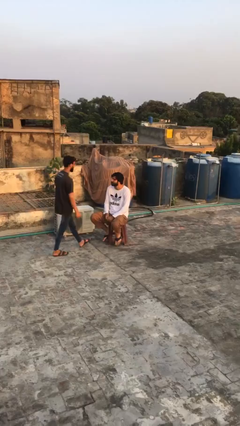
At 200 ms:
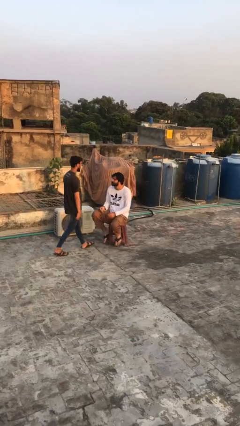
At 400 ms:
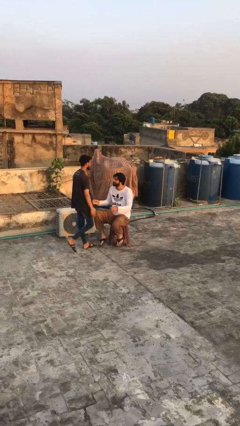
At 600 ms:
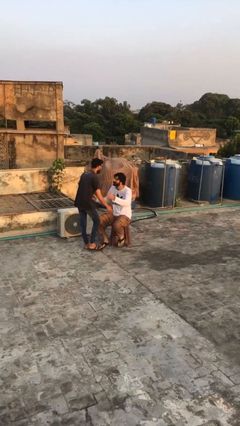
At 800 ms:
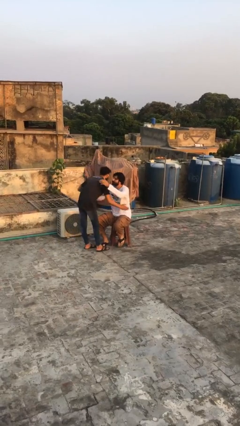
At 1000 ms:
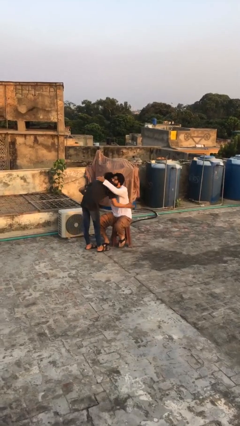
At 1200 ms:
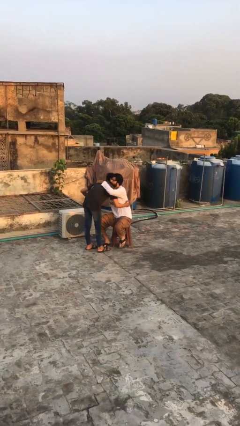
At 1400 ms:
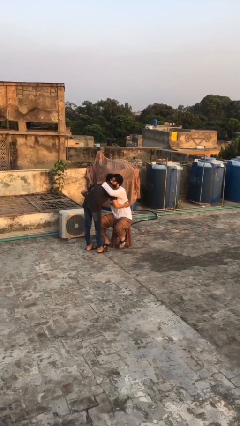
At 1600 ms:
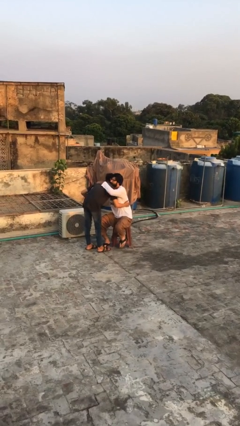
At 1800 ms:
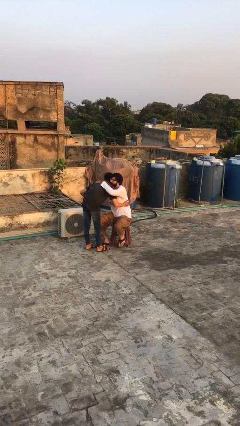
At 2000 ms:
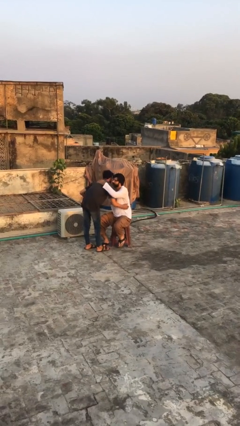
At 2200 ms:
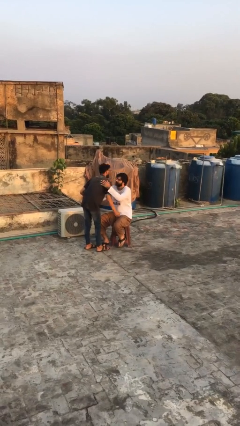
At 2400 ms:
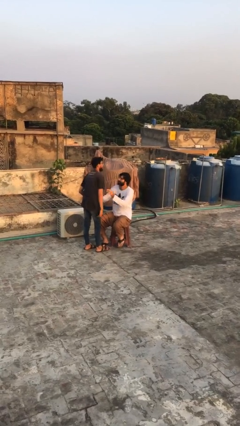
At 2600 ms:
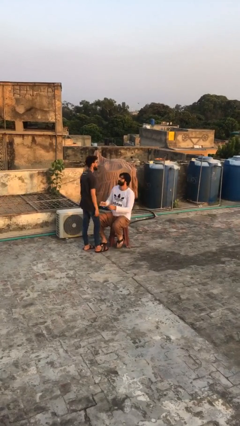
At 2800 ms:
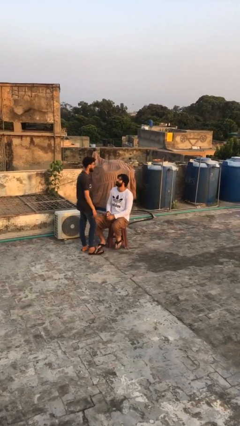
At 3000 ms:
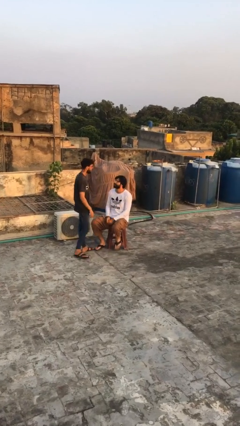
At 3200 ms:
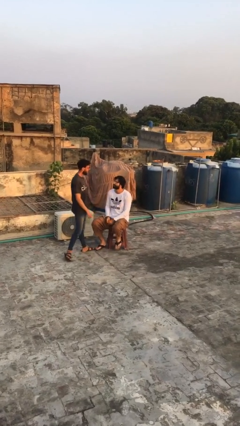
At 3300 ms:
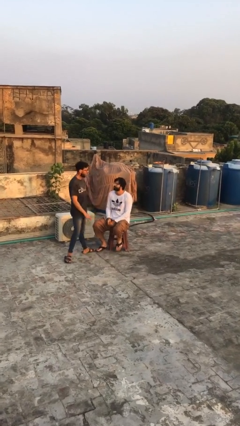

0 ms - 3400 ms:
person embraces person

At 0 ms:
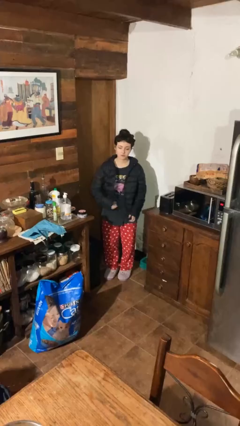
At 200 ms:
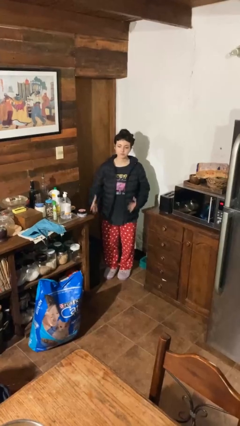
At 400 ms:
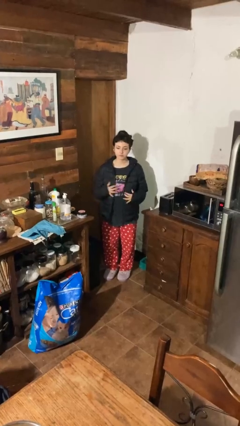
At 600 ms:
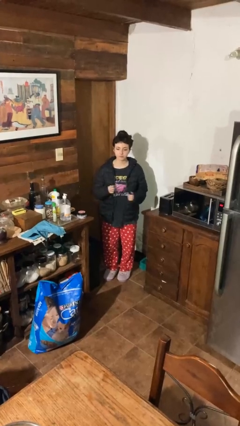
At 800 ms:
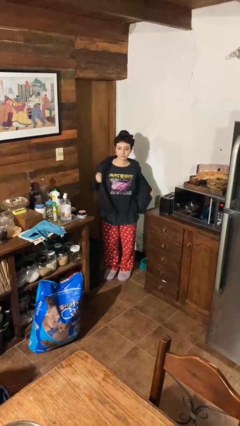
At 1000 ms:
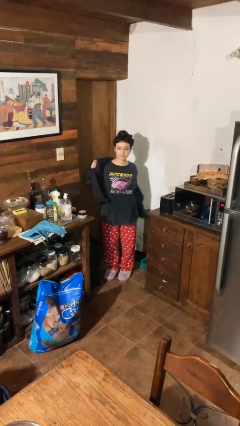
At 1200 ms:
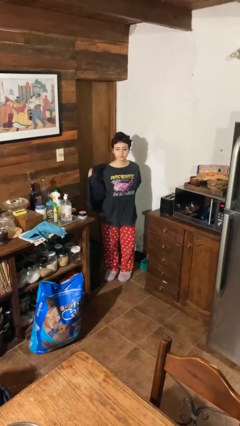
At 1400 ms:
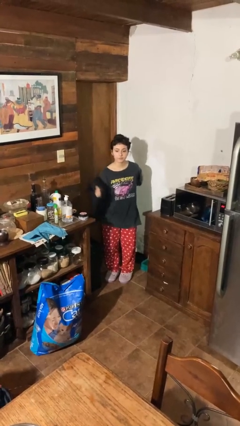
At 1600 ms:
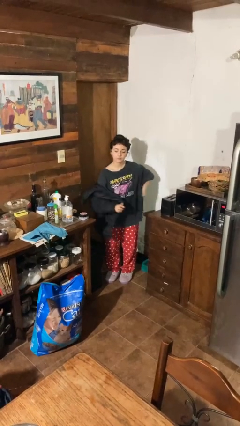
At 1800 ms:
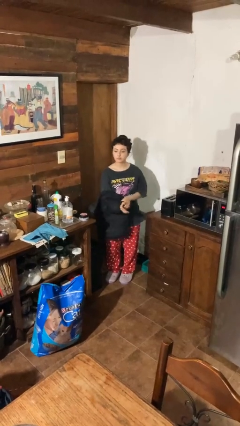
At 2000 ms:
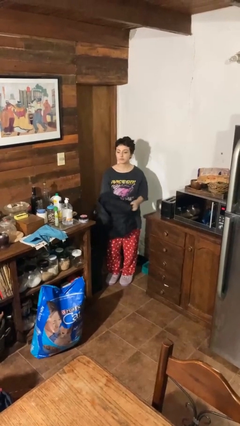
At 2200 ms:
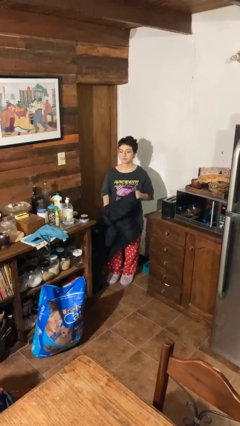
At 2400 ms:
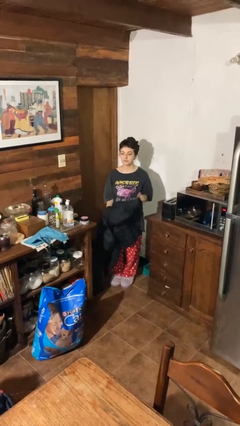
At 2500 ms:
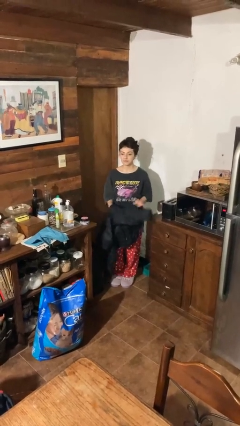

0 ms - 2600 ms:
person takes off jacket

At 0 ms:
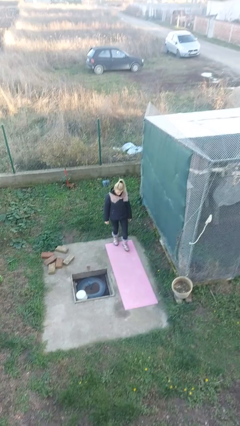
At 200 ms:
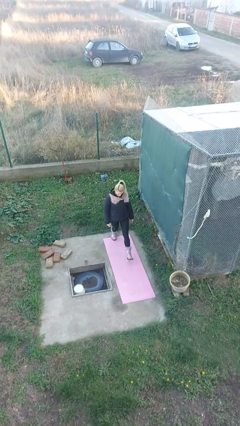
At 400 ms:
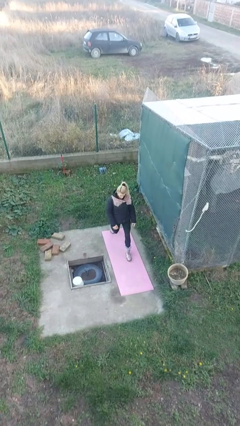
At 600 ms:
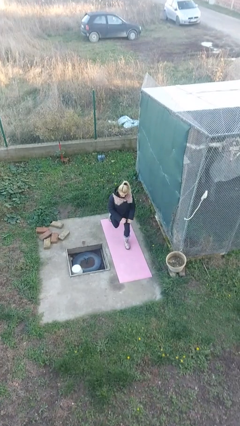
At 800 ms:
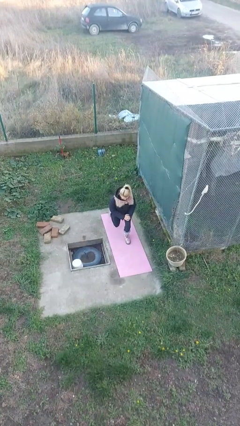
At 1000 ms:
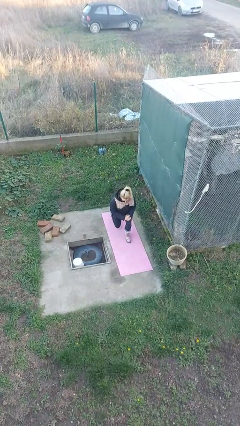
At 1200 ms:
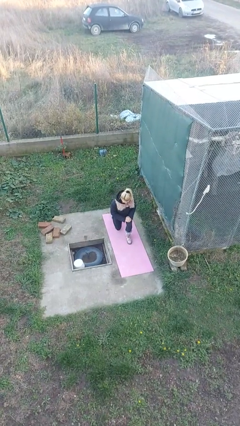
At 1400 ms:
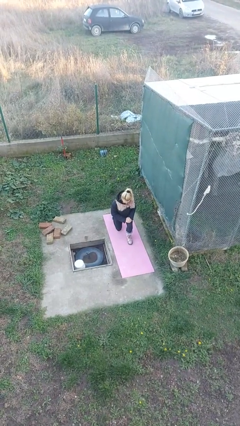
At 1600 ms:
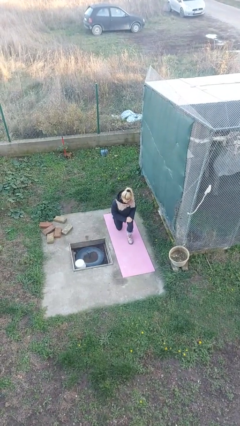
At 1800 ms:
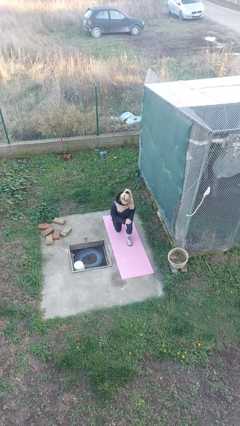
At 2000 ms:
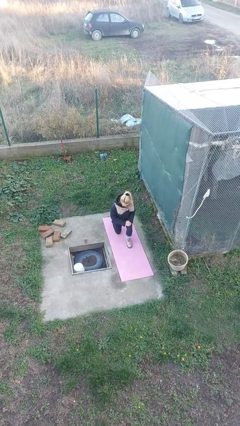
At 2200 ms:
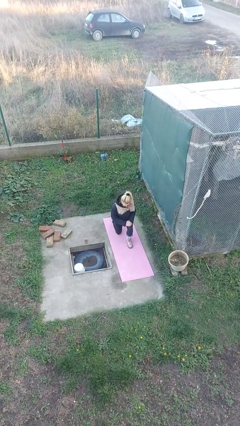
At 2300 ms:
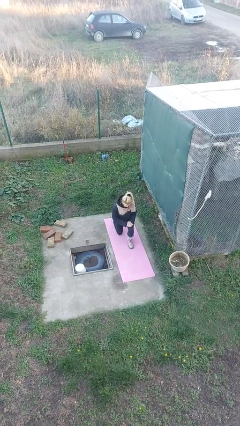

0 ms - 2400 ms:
person kneels

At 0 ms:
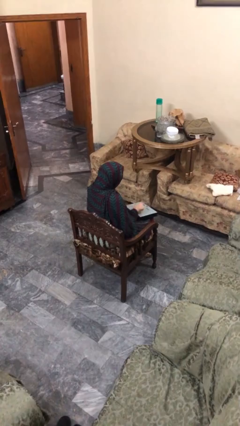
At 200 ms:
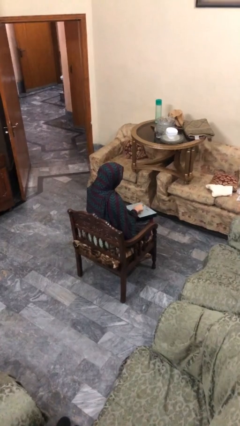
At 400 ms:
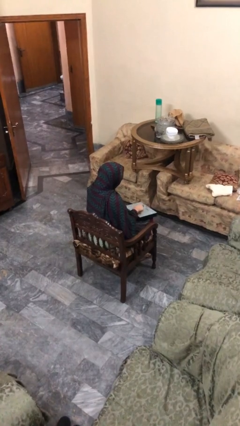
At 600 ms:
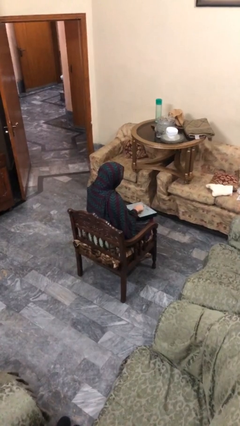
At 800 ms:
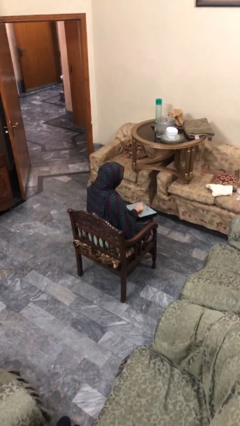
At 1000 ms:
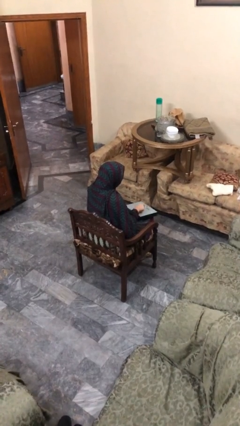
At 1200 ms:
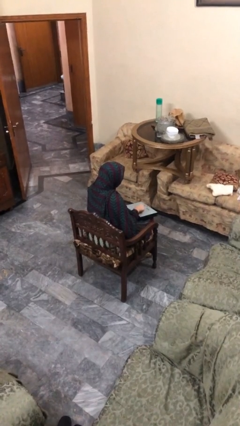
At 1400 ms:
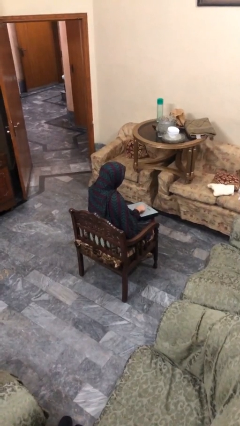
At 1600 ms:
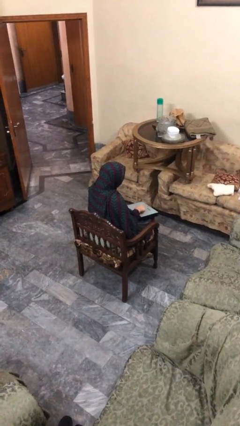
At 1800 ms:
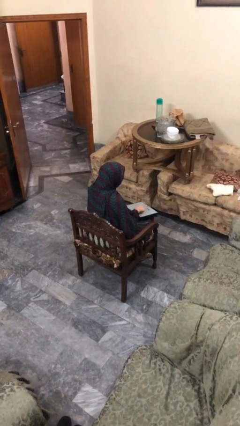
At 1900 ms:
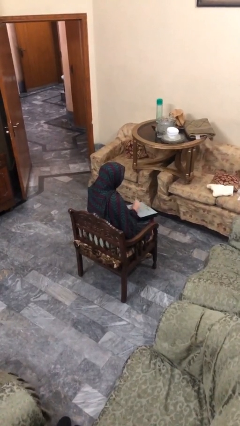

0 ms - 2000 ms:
person taps object with finger

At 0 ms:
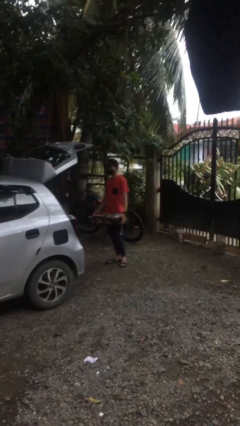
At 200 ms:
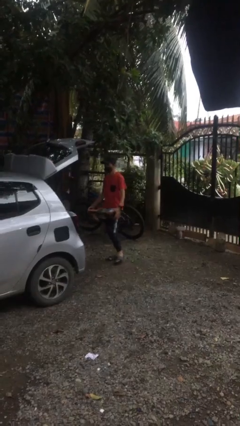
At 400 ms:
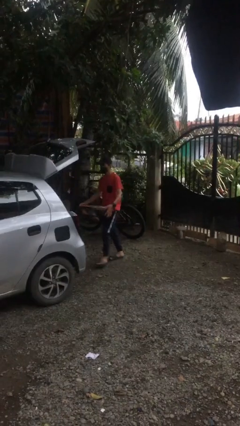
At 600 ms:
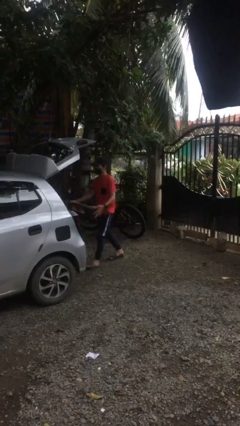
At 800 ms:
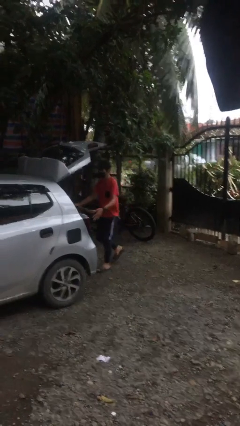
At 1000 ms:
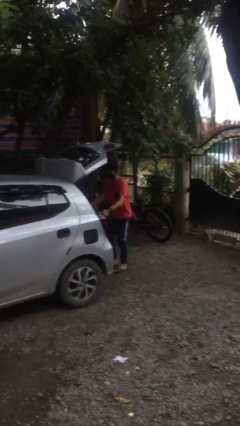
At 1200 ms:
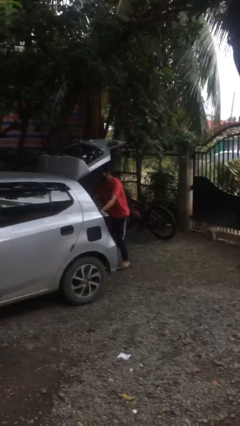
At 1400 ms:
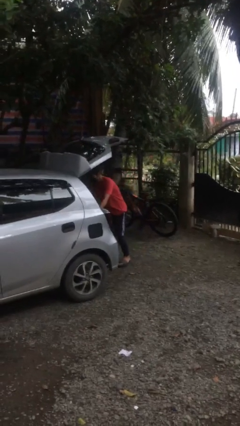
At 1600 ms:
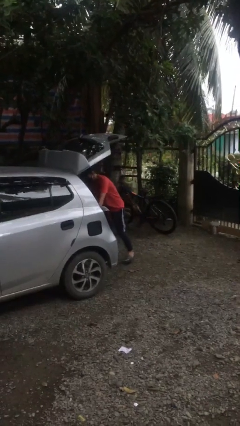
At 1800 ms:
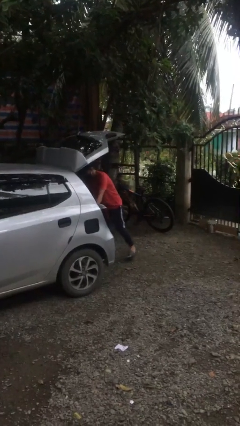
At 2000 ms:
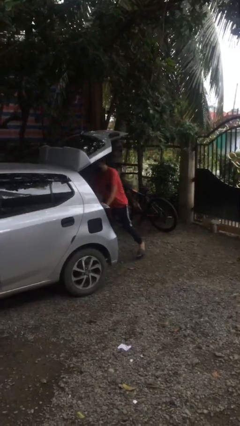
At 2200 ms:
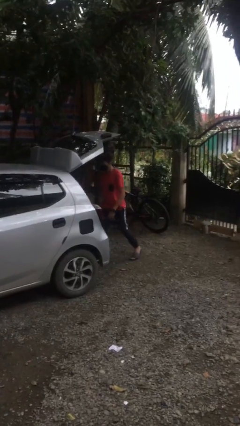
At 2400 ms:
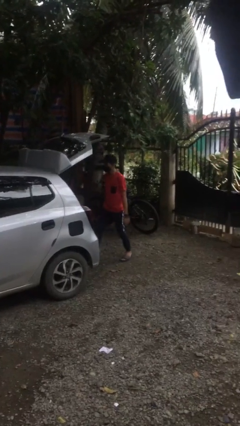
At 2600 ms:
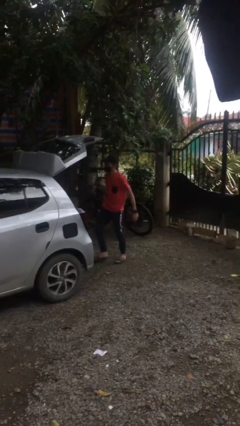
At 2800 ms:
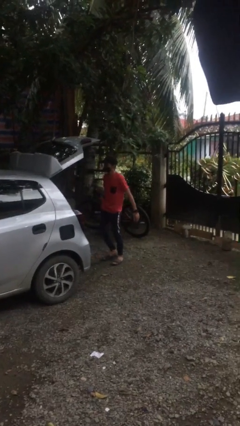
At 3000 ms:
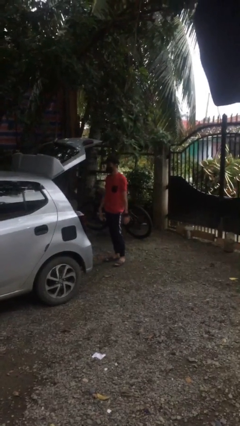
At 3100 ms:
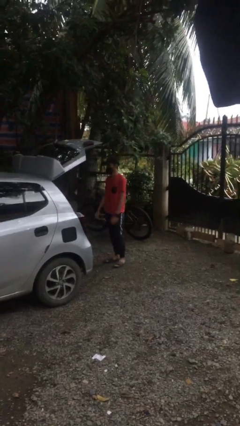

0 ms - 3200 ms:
person loads car

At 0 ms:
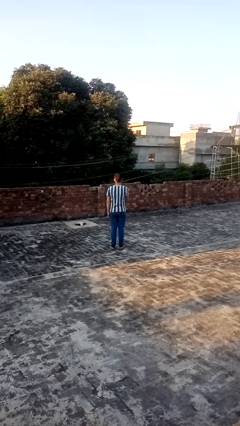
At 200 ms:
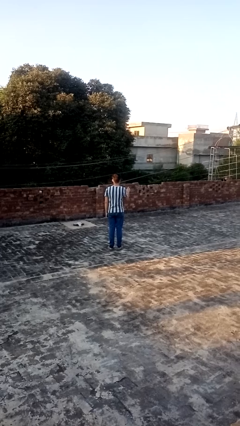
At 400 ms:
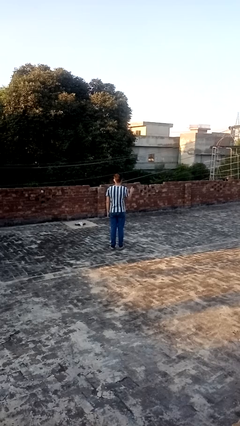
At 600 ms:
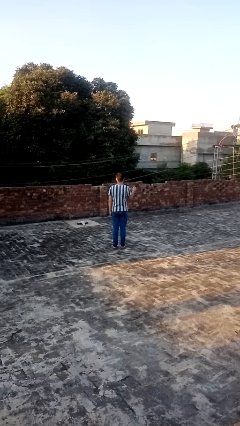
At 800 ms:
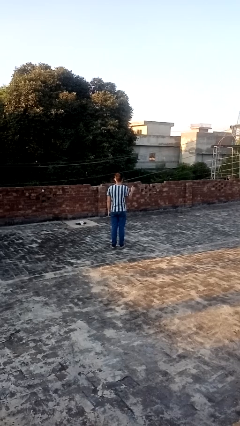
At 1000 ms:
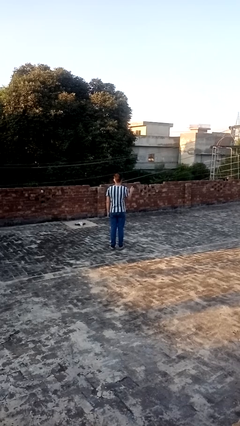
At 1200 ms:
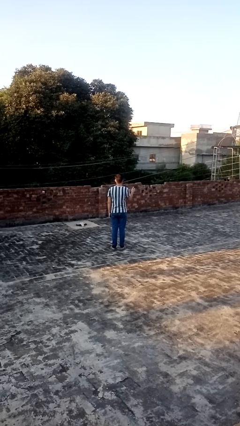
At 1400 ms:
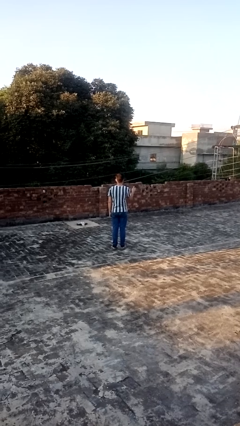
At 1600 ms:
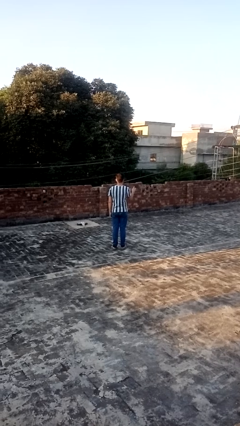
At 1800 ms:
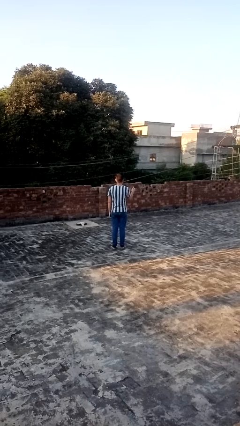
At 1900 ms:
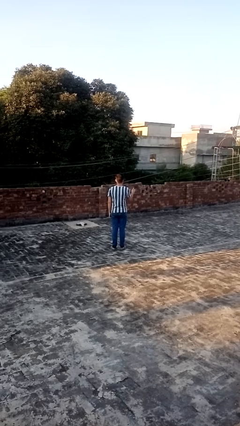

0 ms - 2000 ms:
person gestures swipe right

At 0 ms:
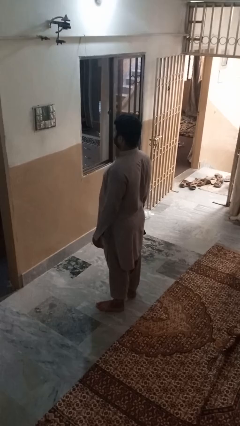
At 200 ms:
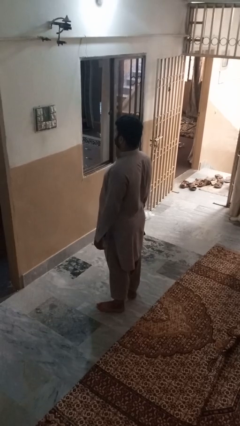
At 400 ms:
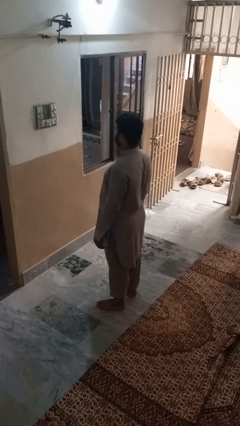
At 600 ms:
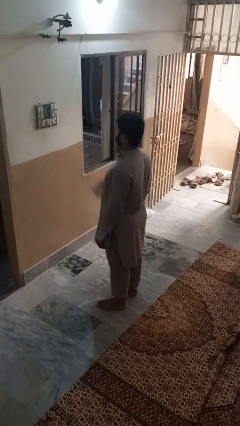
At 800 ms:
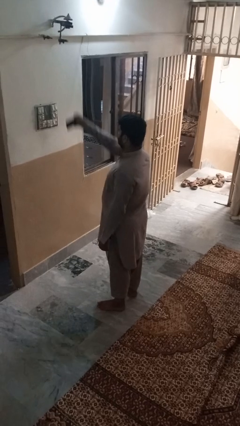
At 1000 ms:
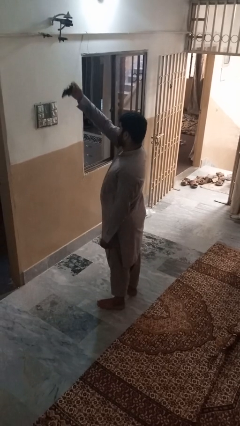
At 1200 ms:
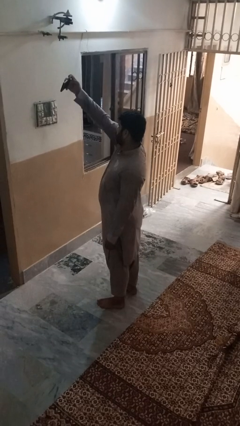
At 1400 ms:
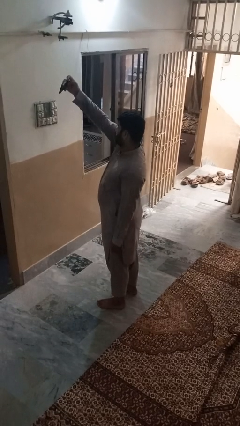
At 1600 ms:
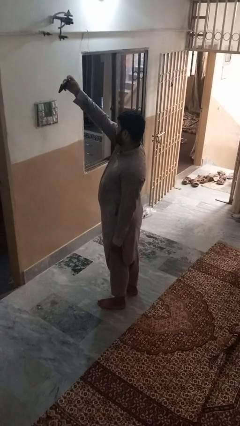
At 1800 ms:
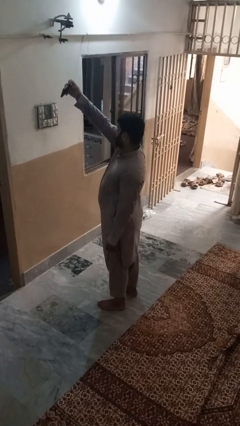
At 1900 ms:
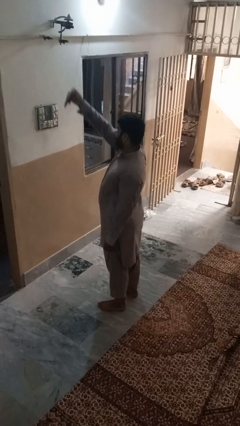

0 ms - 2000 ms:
person takes selfie
